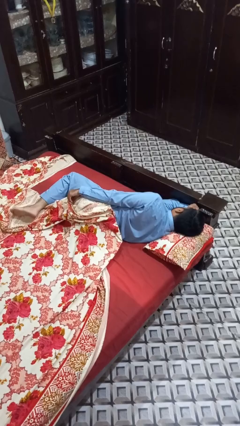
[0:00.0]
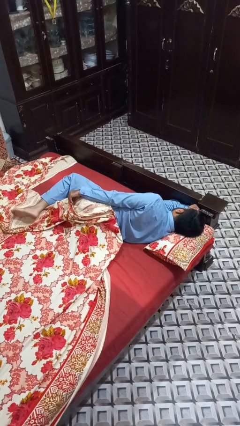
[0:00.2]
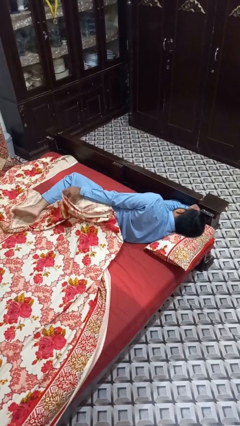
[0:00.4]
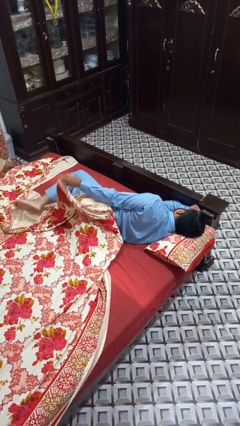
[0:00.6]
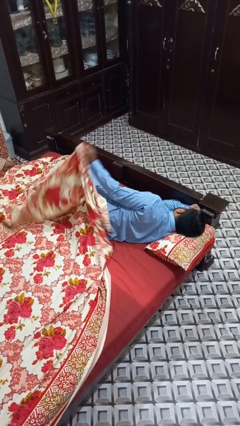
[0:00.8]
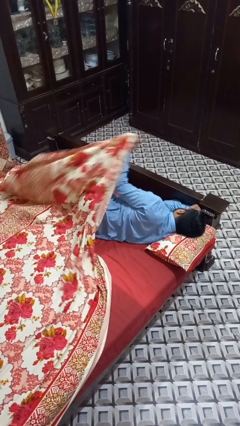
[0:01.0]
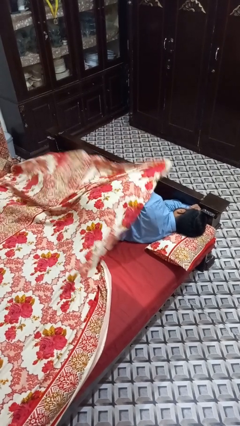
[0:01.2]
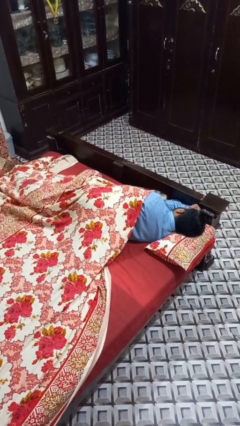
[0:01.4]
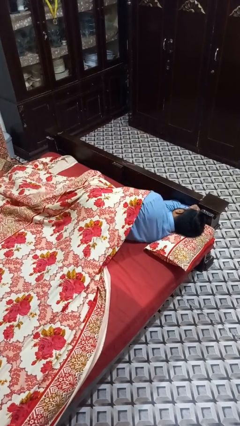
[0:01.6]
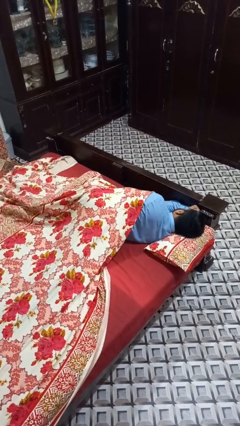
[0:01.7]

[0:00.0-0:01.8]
person covers with bedsheets

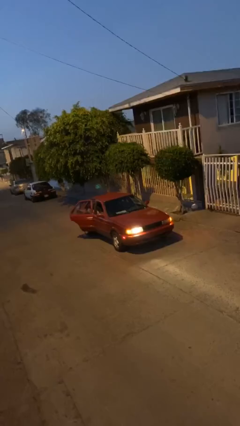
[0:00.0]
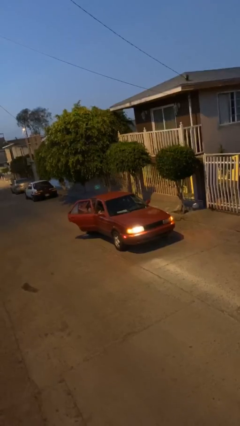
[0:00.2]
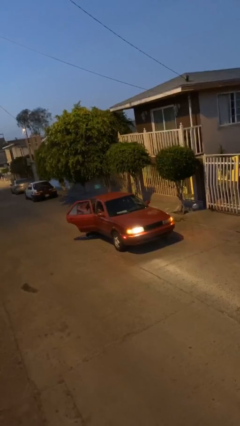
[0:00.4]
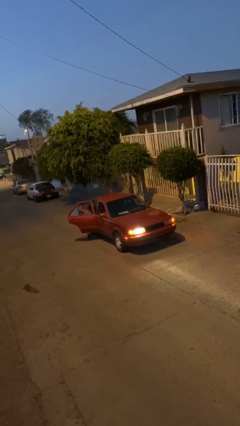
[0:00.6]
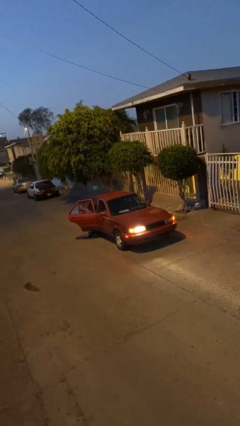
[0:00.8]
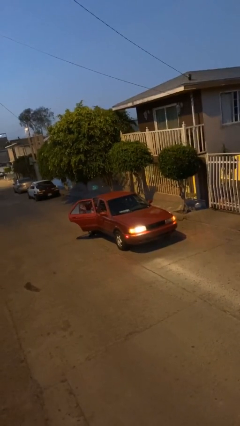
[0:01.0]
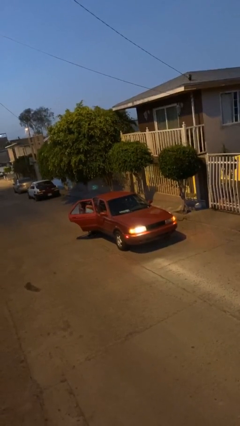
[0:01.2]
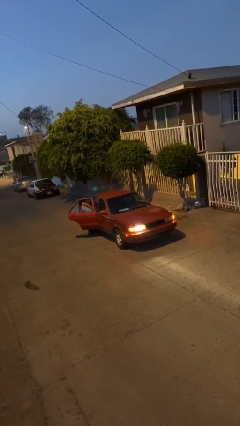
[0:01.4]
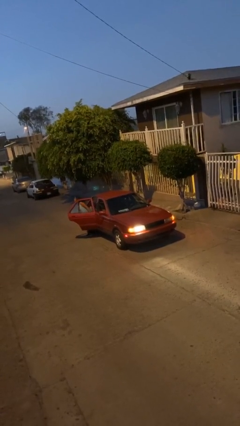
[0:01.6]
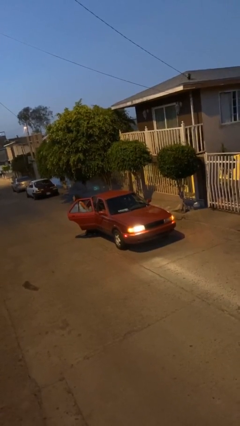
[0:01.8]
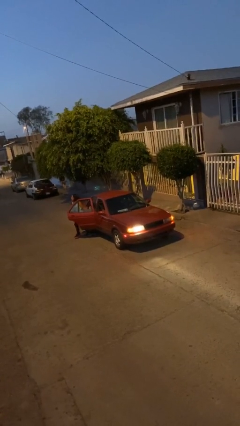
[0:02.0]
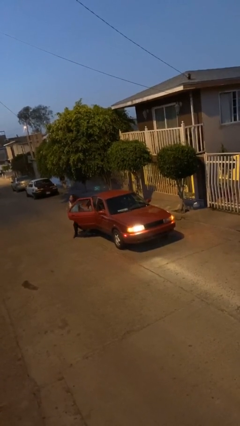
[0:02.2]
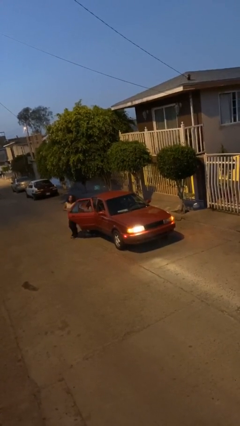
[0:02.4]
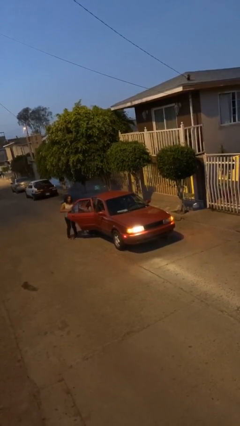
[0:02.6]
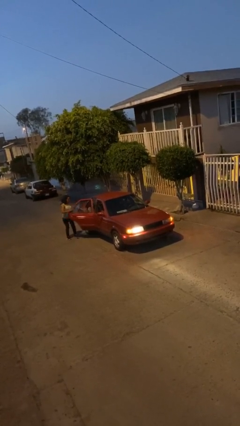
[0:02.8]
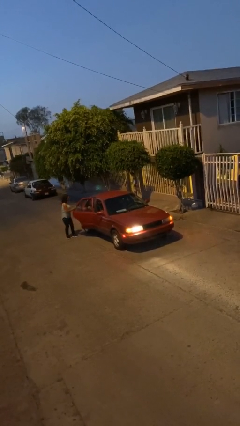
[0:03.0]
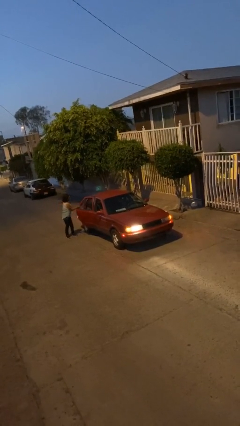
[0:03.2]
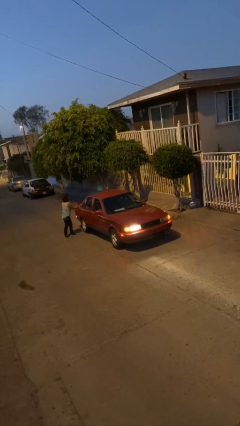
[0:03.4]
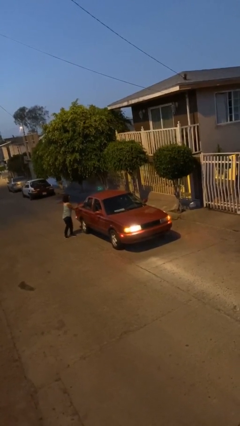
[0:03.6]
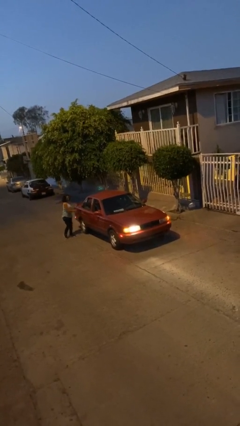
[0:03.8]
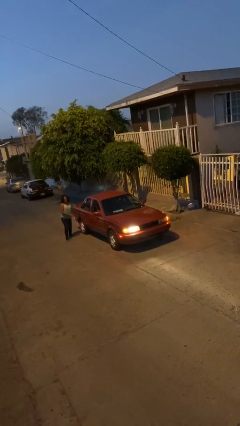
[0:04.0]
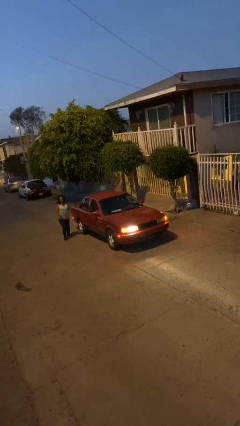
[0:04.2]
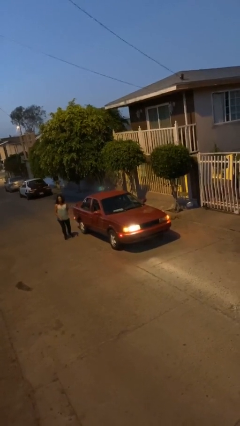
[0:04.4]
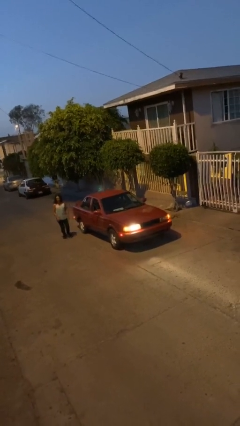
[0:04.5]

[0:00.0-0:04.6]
car drops off person

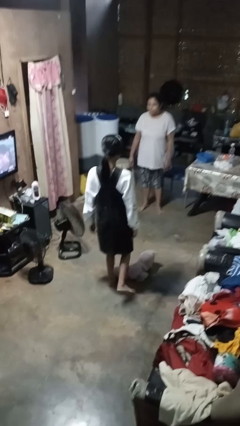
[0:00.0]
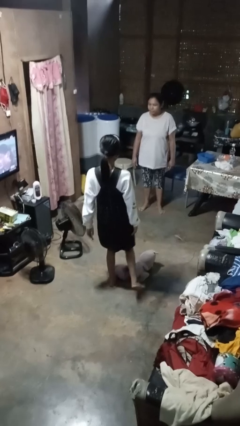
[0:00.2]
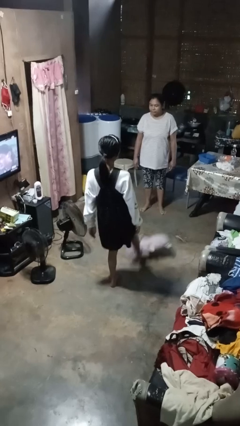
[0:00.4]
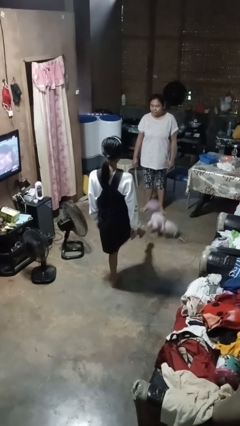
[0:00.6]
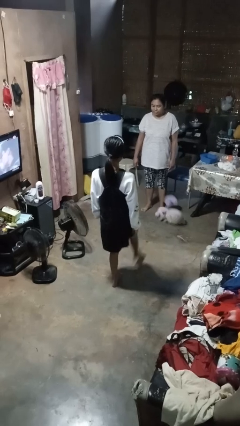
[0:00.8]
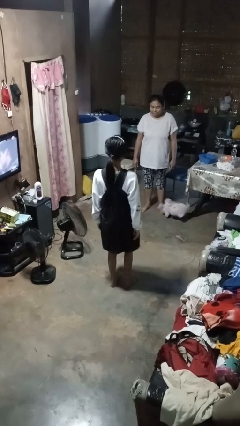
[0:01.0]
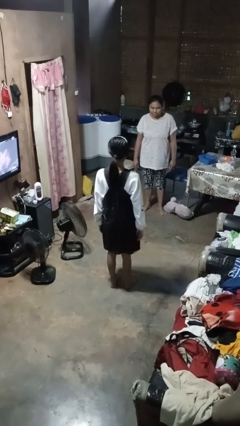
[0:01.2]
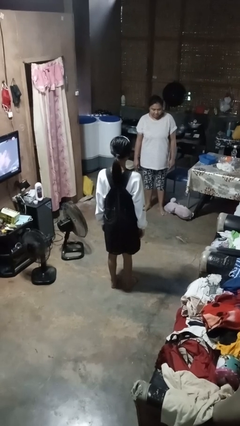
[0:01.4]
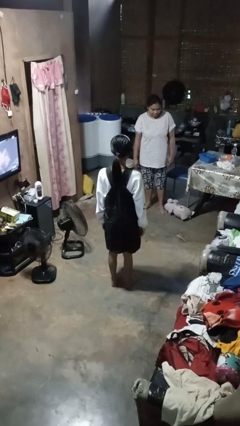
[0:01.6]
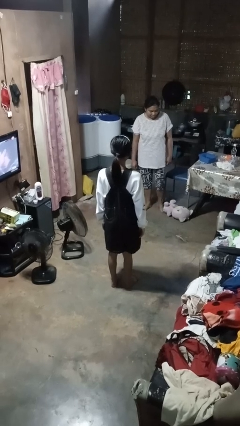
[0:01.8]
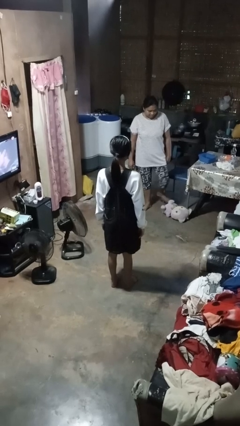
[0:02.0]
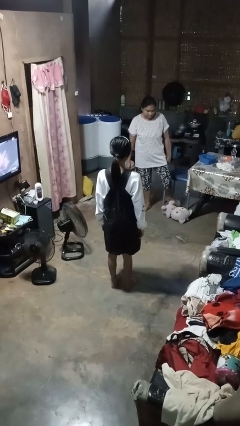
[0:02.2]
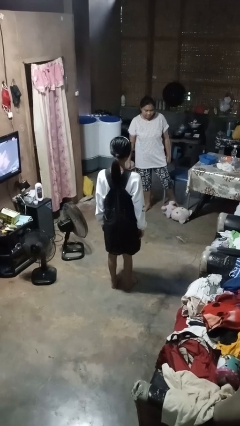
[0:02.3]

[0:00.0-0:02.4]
person kicks object to person

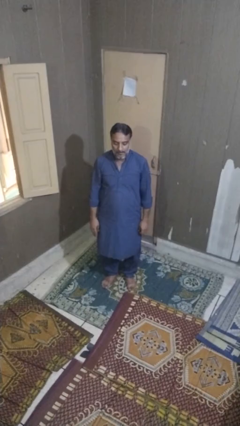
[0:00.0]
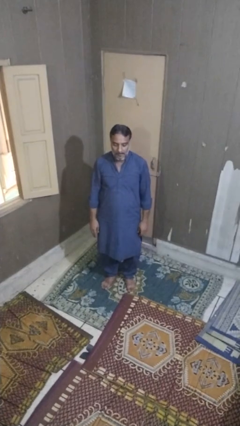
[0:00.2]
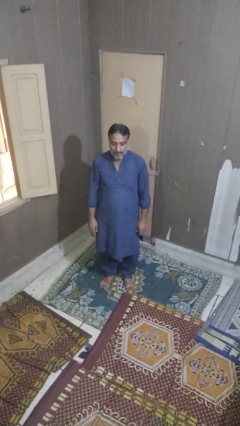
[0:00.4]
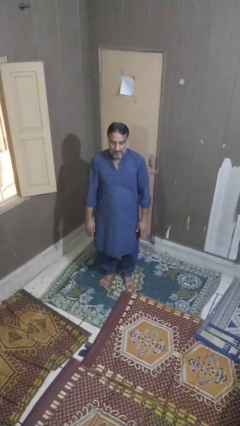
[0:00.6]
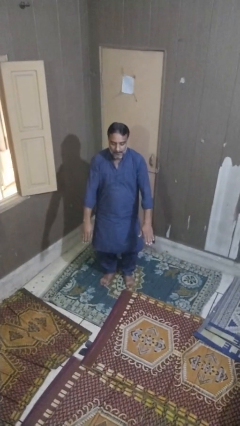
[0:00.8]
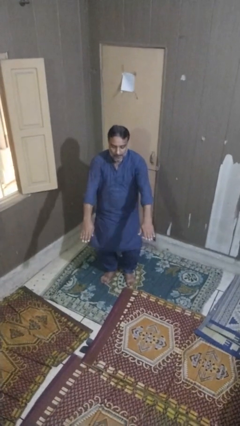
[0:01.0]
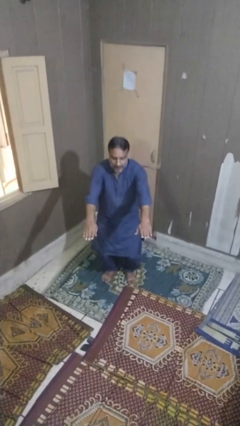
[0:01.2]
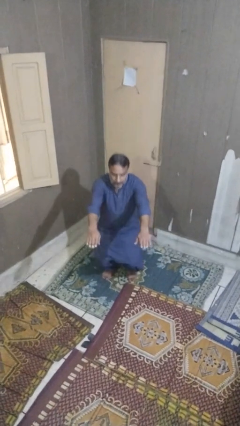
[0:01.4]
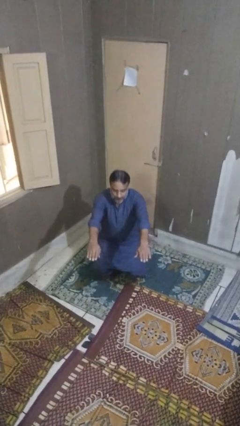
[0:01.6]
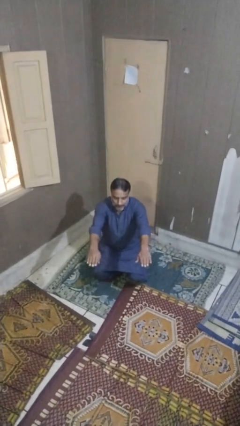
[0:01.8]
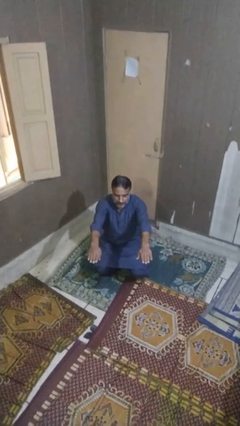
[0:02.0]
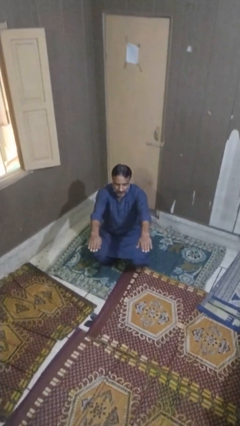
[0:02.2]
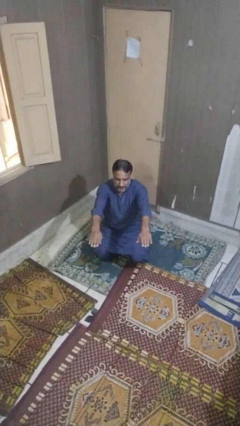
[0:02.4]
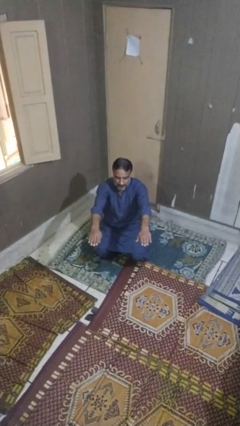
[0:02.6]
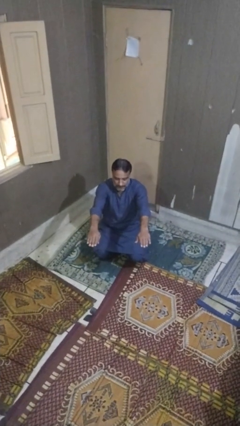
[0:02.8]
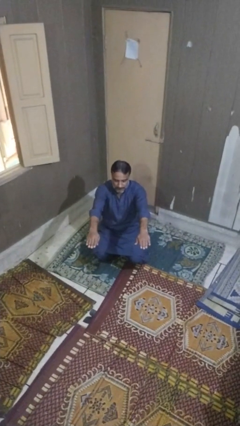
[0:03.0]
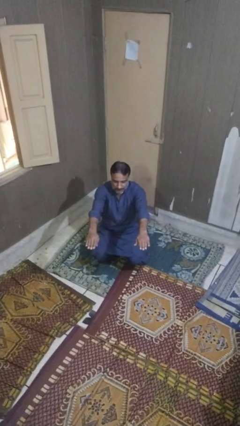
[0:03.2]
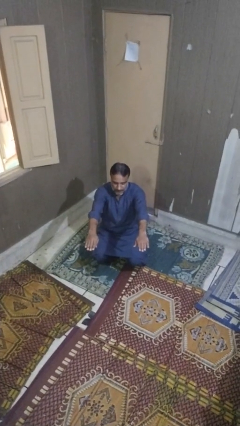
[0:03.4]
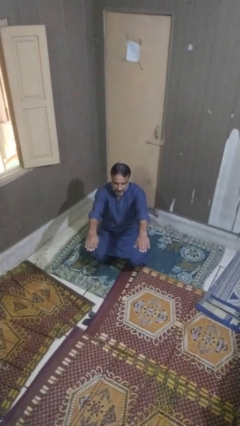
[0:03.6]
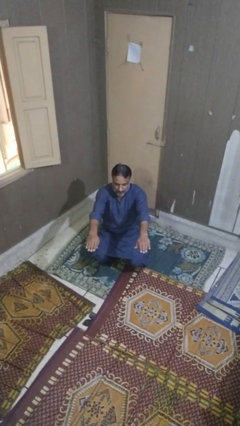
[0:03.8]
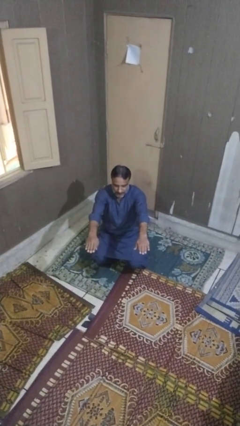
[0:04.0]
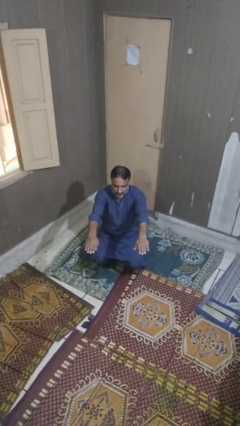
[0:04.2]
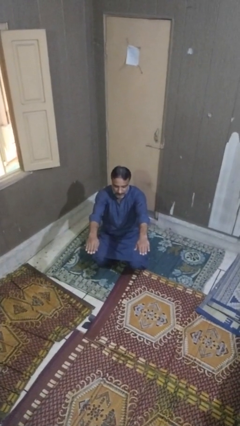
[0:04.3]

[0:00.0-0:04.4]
person squats

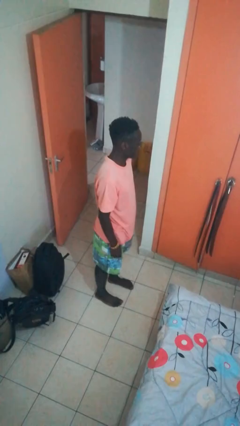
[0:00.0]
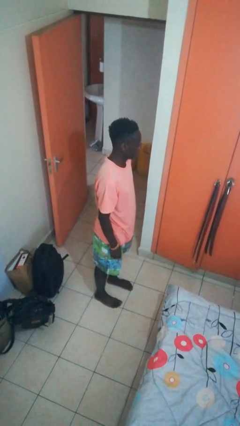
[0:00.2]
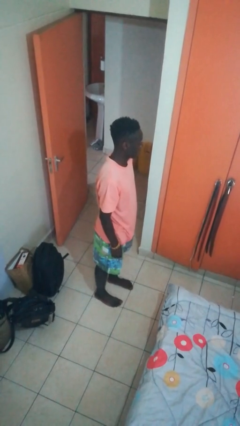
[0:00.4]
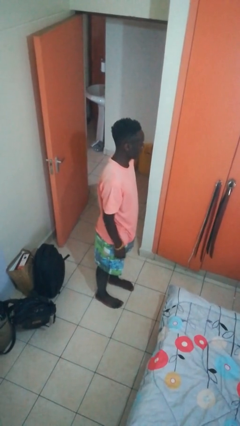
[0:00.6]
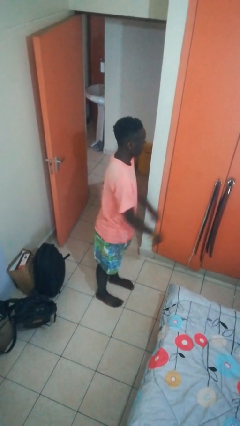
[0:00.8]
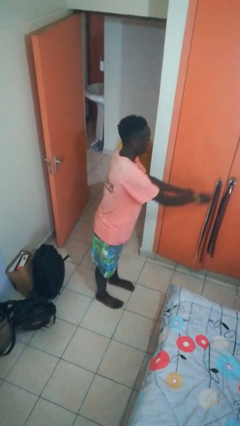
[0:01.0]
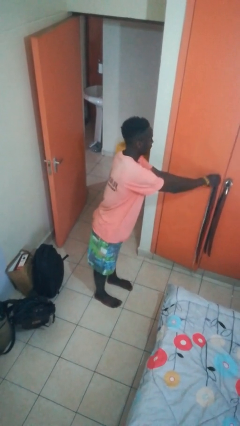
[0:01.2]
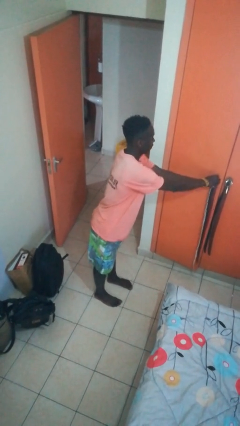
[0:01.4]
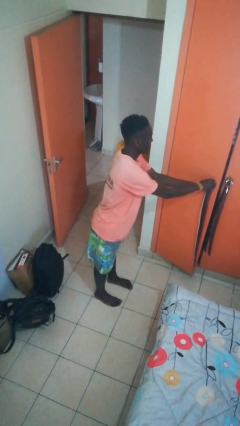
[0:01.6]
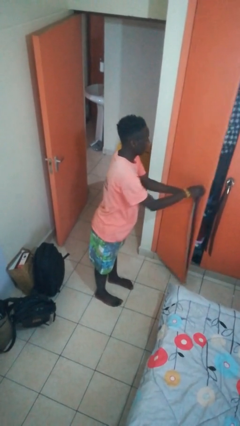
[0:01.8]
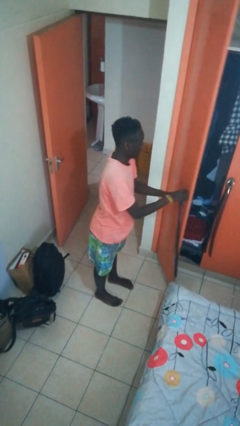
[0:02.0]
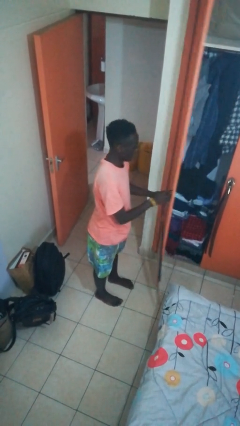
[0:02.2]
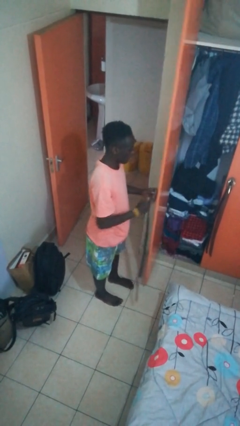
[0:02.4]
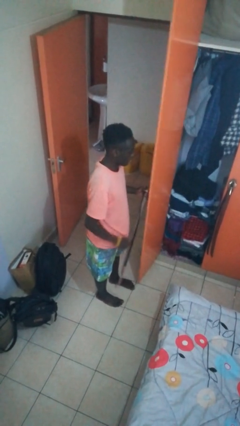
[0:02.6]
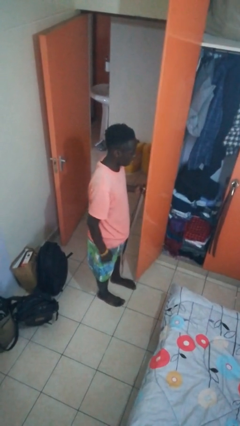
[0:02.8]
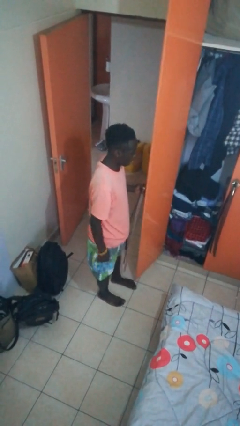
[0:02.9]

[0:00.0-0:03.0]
person opens closet door

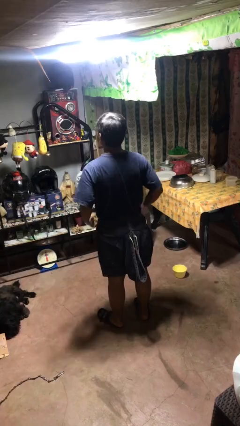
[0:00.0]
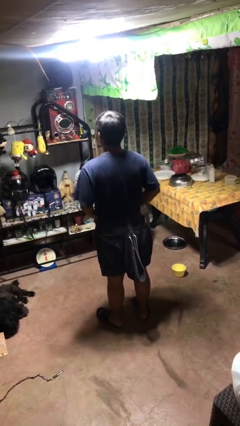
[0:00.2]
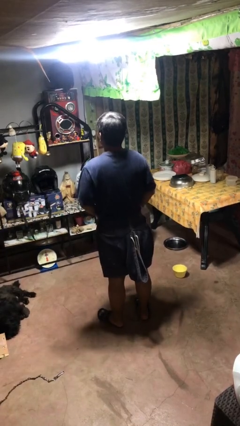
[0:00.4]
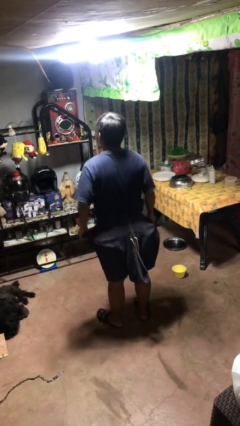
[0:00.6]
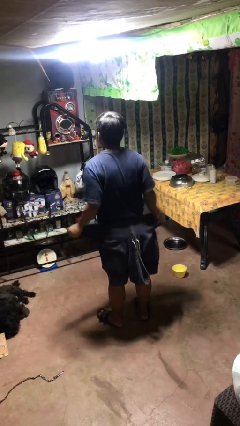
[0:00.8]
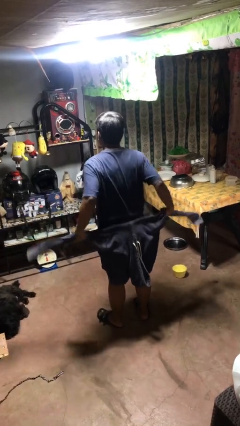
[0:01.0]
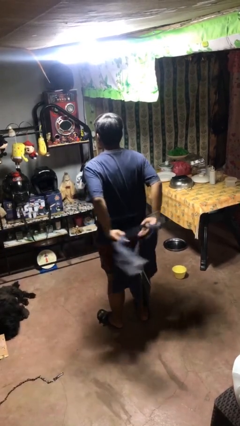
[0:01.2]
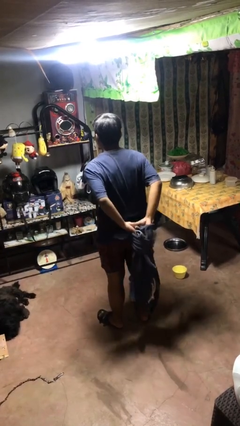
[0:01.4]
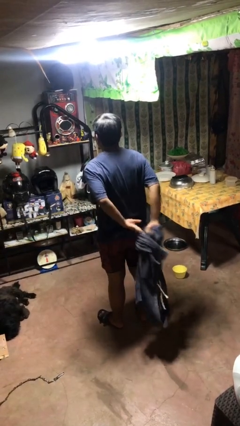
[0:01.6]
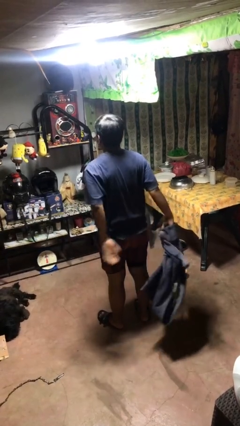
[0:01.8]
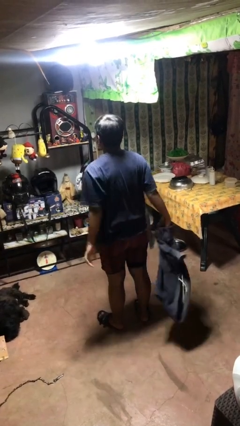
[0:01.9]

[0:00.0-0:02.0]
person unties jacket around waist
